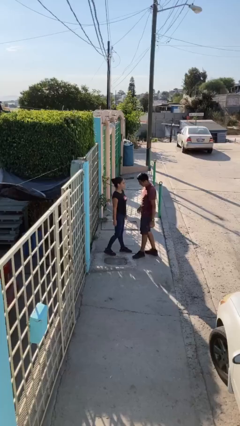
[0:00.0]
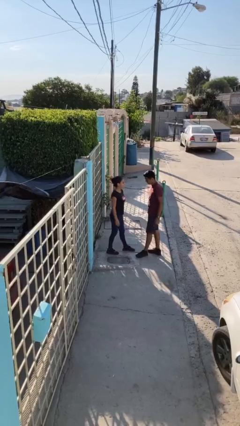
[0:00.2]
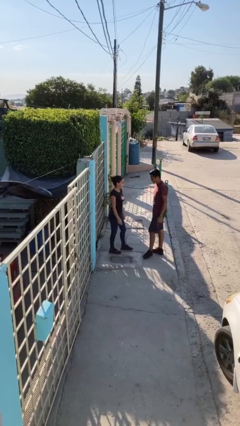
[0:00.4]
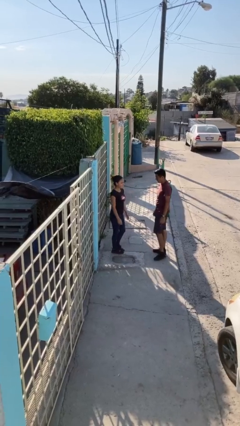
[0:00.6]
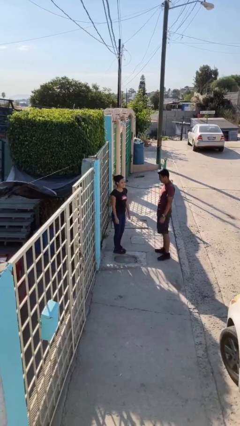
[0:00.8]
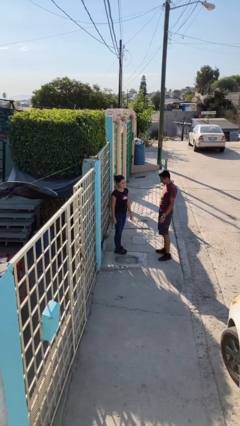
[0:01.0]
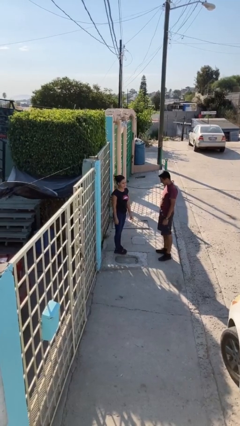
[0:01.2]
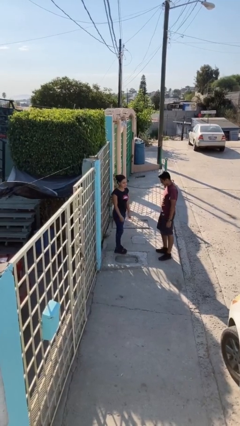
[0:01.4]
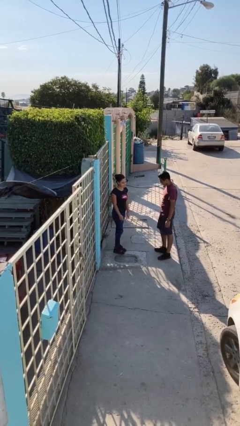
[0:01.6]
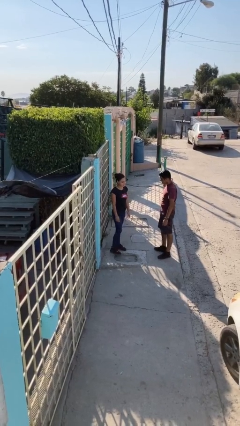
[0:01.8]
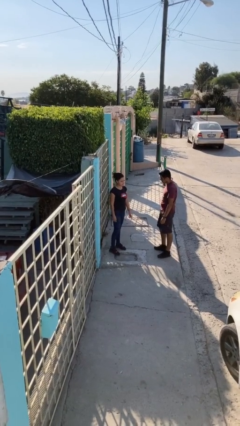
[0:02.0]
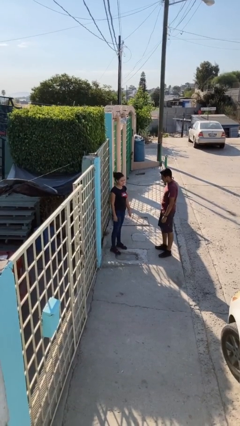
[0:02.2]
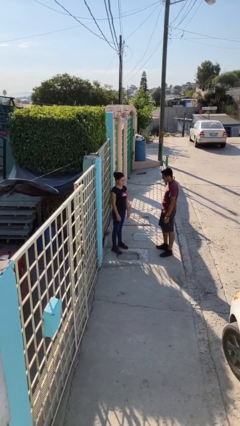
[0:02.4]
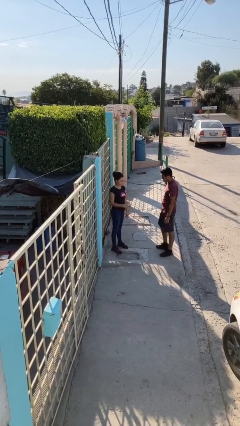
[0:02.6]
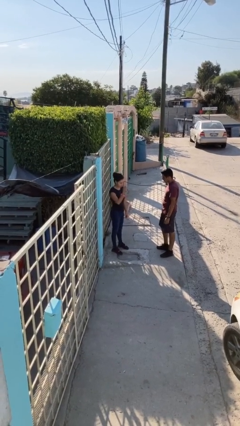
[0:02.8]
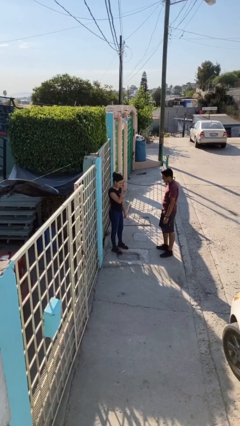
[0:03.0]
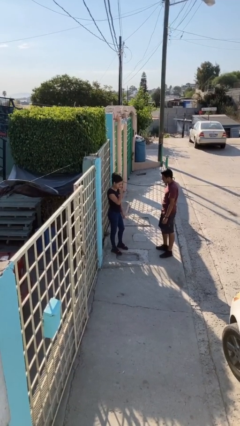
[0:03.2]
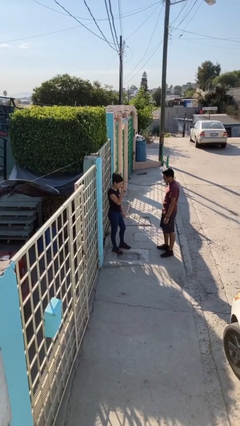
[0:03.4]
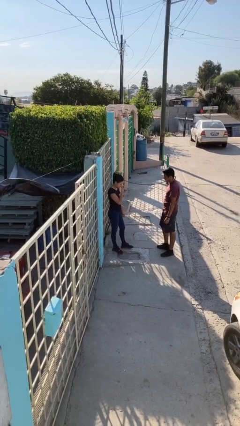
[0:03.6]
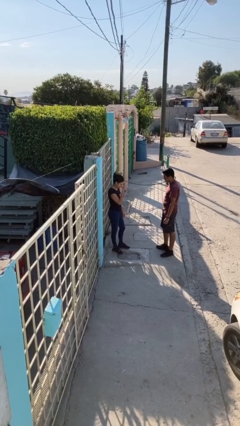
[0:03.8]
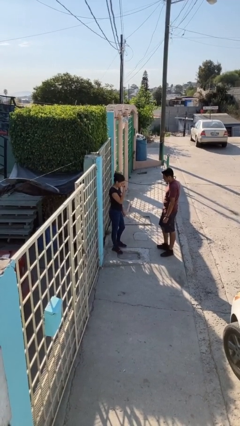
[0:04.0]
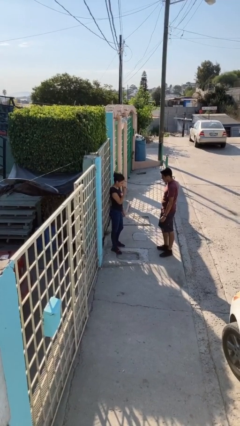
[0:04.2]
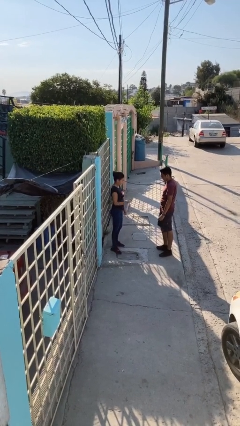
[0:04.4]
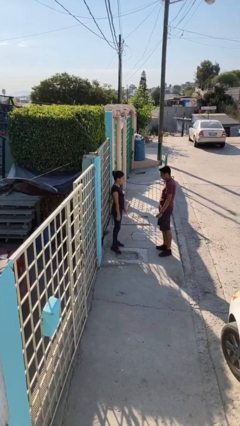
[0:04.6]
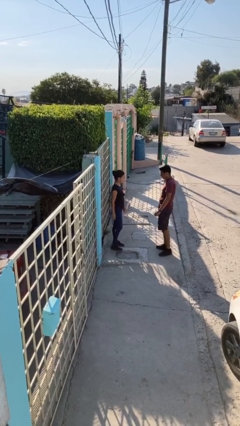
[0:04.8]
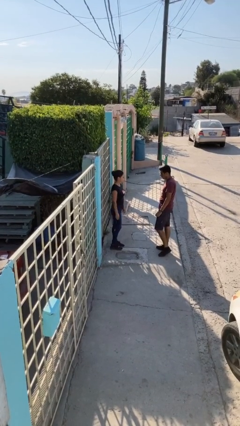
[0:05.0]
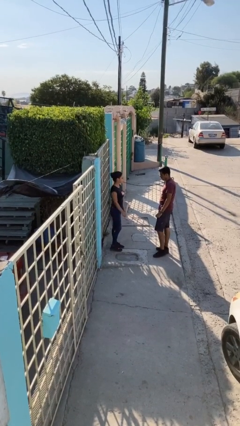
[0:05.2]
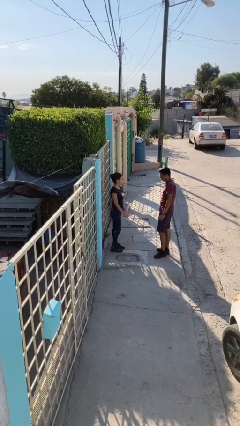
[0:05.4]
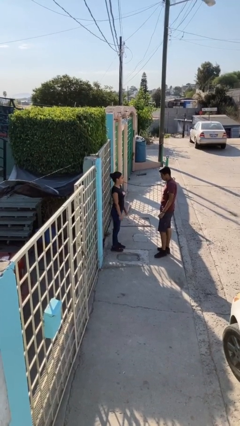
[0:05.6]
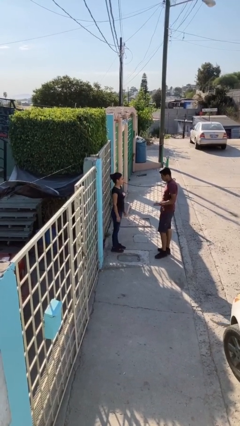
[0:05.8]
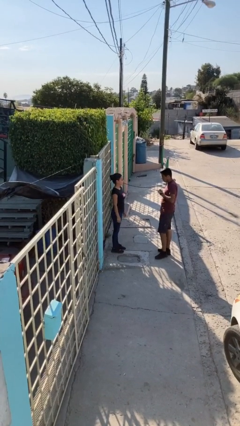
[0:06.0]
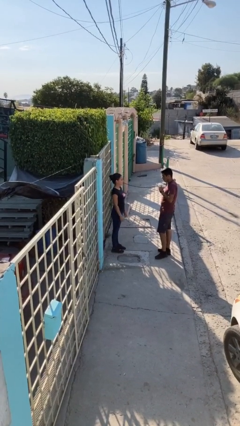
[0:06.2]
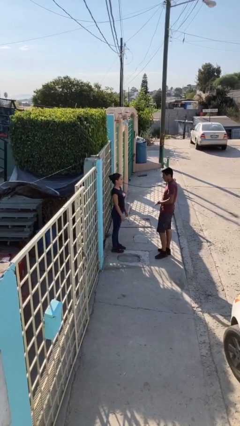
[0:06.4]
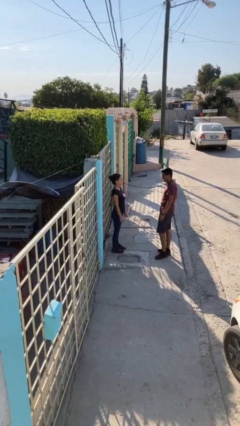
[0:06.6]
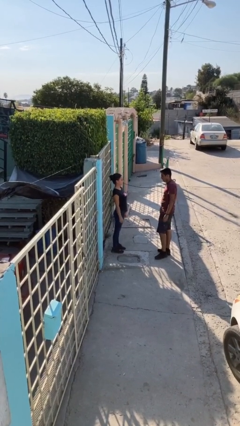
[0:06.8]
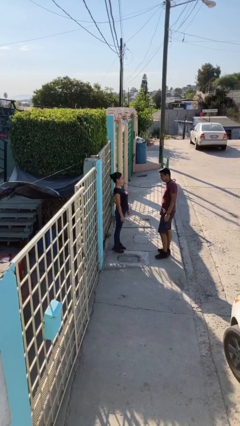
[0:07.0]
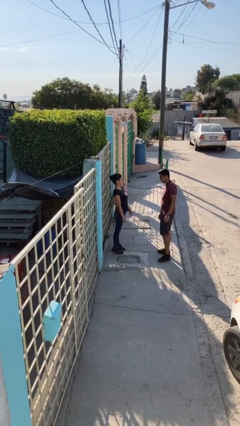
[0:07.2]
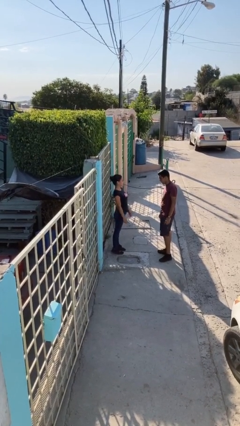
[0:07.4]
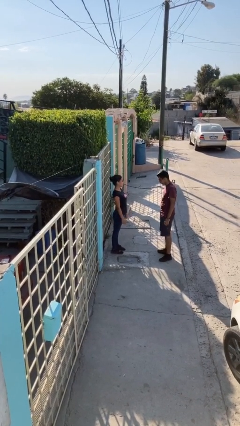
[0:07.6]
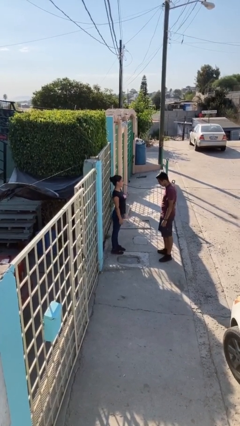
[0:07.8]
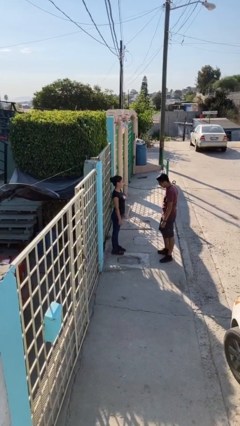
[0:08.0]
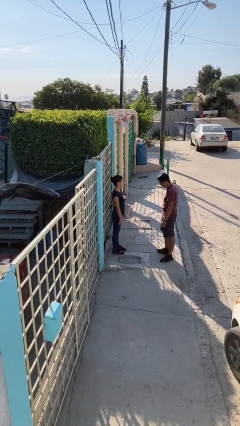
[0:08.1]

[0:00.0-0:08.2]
person talks to person

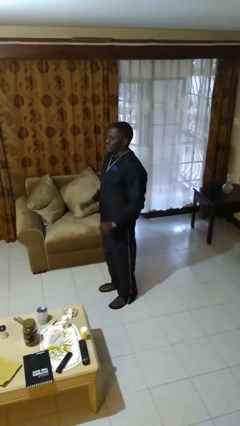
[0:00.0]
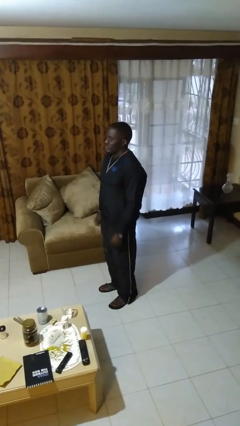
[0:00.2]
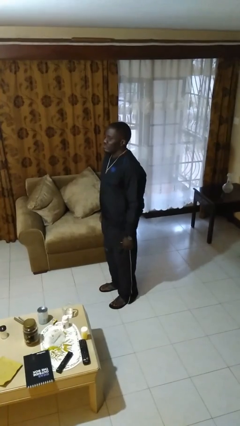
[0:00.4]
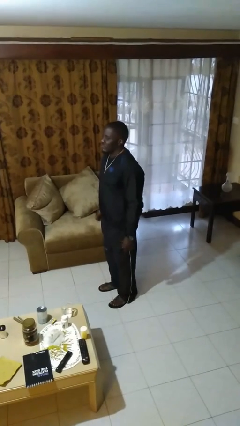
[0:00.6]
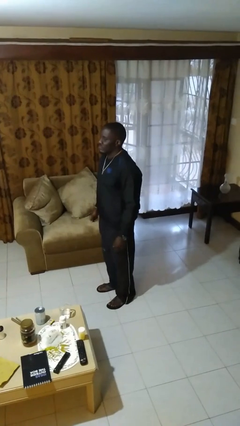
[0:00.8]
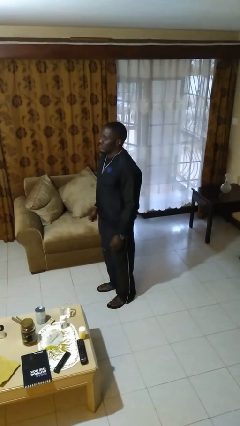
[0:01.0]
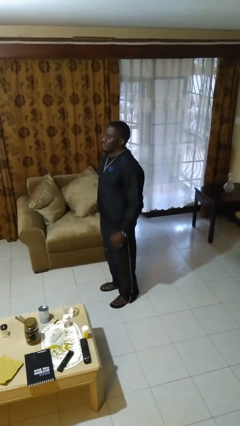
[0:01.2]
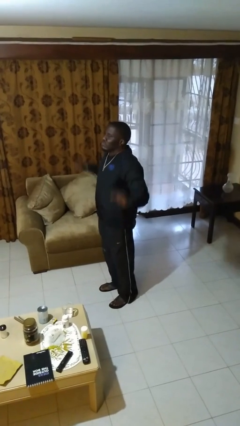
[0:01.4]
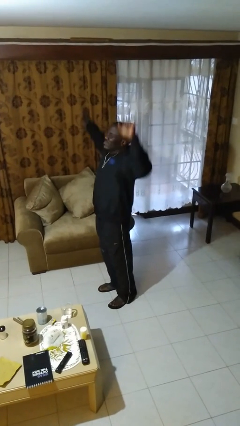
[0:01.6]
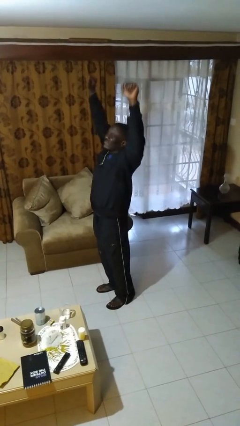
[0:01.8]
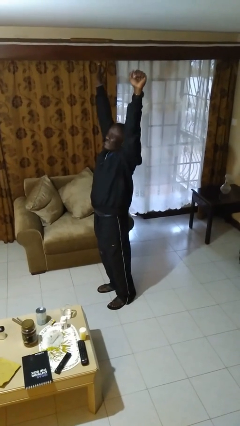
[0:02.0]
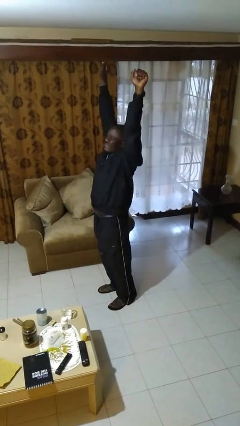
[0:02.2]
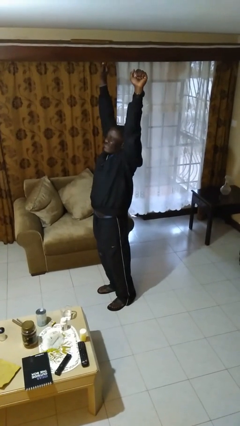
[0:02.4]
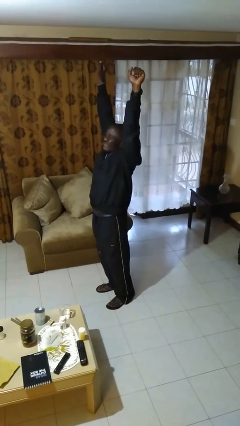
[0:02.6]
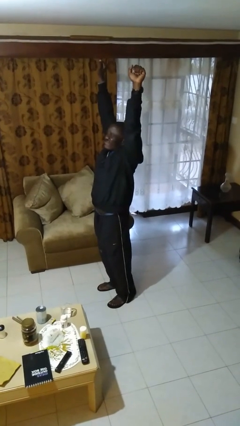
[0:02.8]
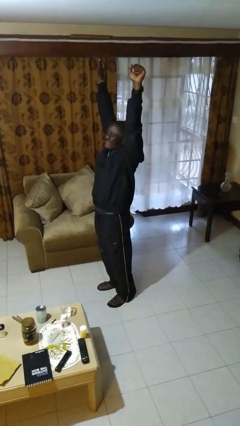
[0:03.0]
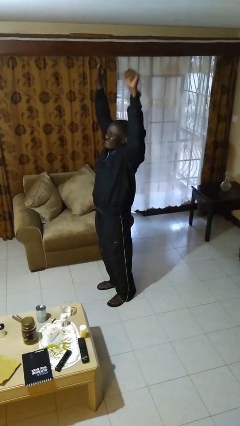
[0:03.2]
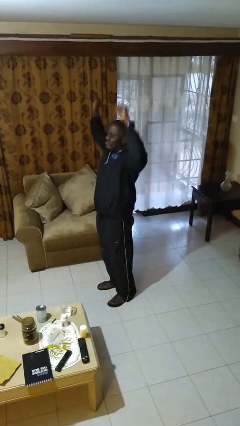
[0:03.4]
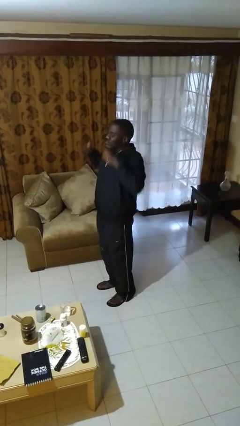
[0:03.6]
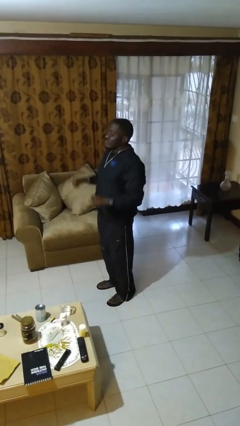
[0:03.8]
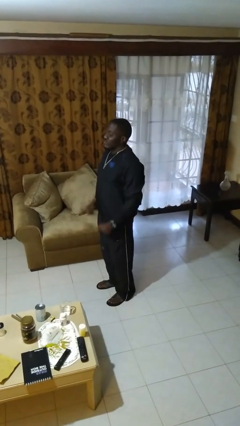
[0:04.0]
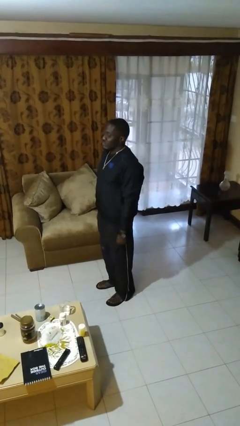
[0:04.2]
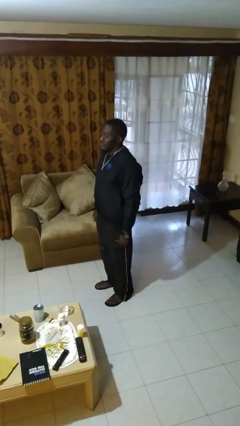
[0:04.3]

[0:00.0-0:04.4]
person stretches arms over head

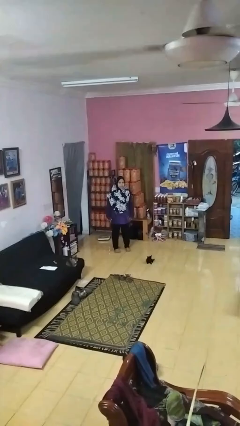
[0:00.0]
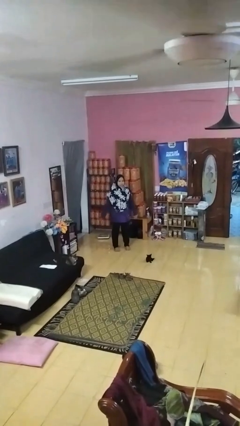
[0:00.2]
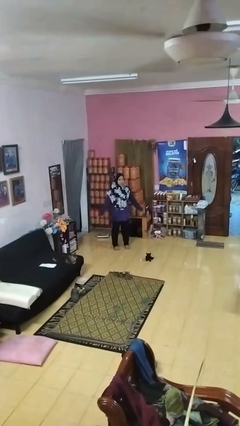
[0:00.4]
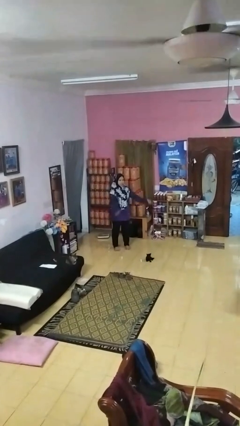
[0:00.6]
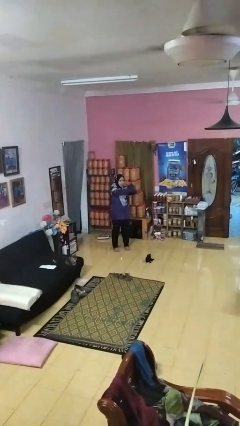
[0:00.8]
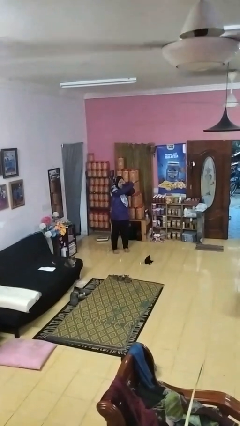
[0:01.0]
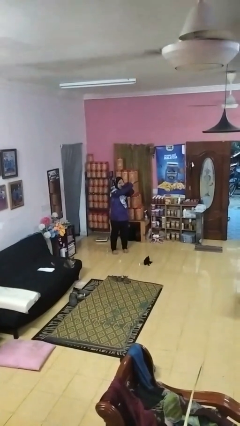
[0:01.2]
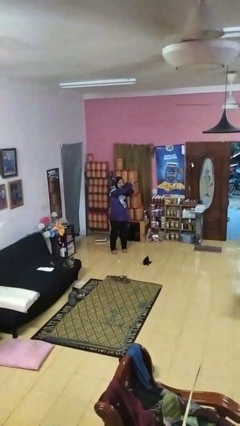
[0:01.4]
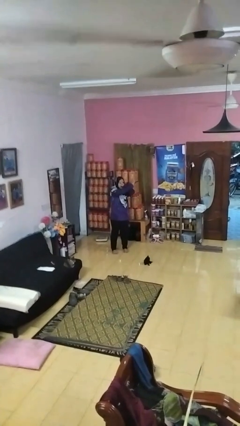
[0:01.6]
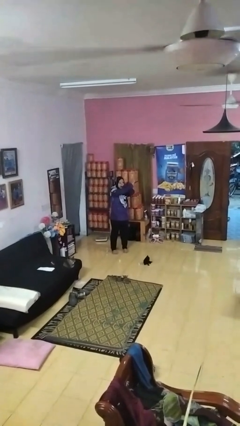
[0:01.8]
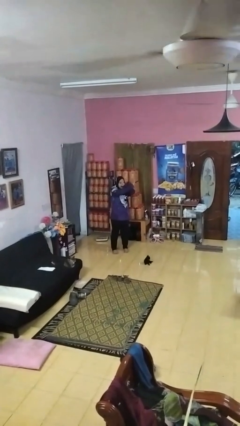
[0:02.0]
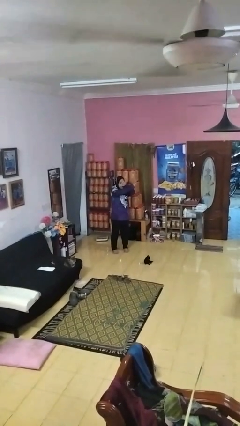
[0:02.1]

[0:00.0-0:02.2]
person gestures arms x

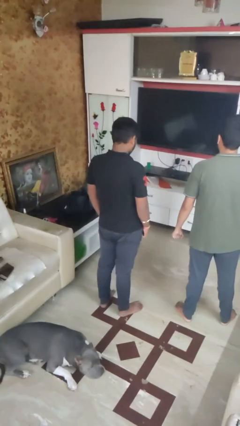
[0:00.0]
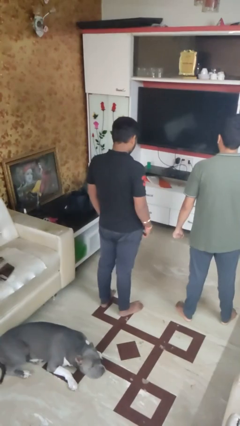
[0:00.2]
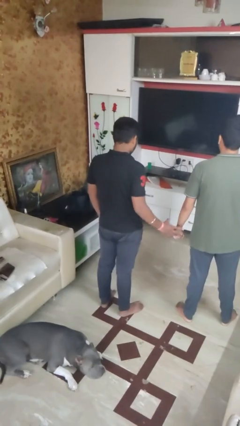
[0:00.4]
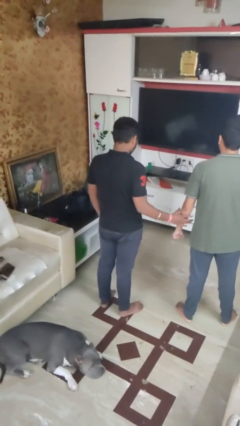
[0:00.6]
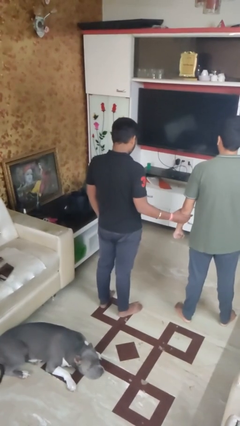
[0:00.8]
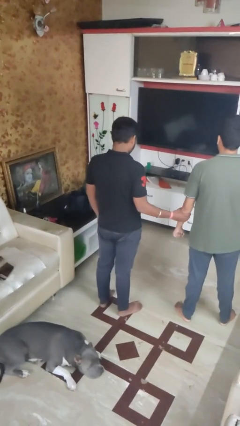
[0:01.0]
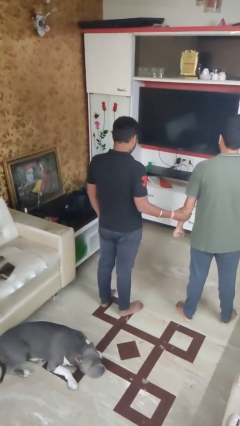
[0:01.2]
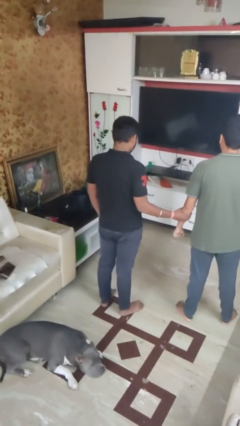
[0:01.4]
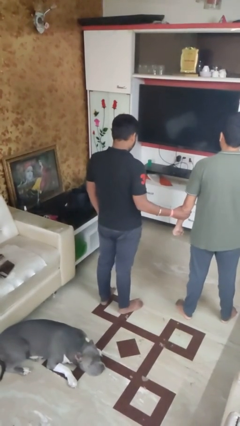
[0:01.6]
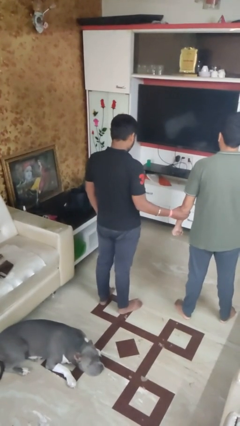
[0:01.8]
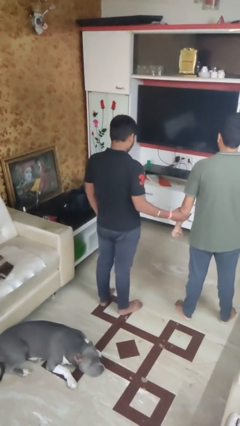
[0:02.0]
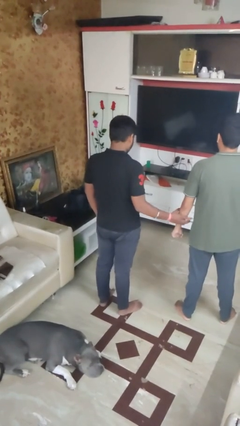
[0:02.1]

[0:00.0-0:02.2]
person grabs person by forearm

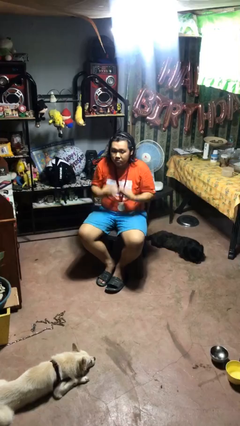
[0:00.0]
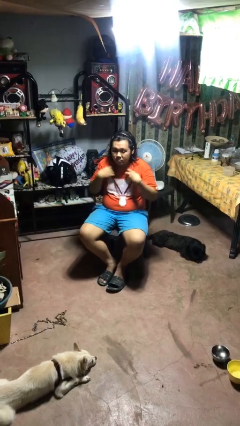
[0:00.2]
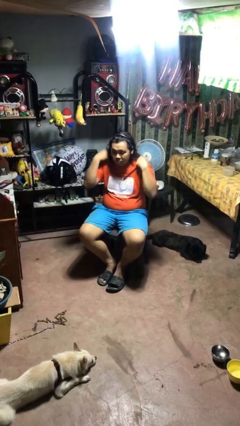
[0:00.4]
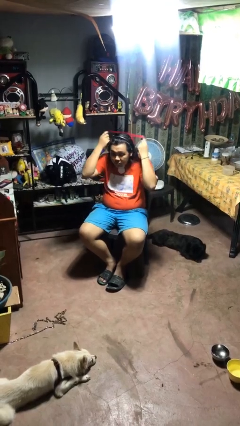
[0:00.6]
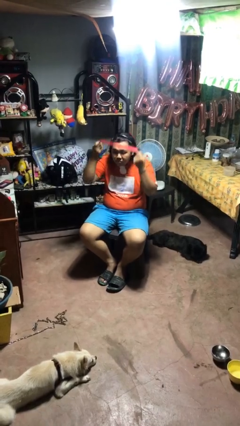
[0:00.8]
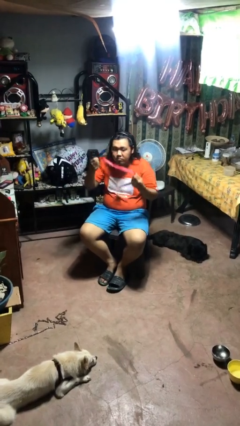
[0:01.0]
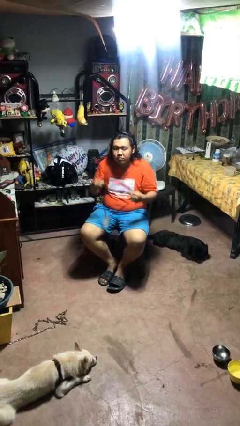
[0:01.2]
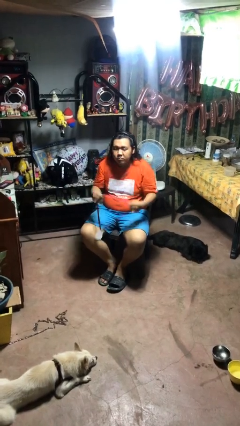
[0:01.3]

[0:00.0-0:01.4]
person takes off necklace
